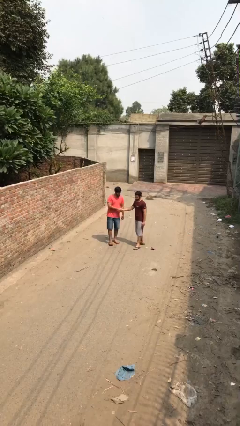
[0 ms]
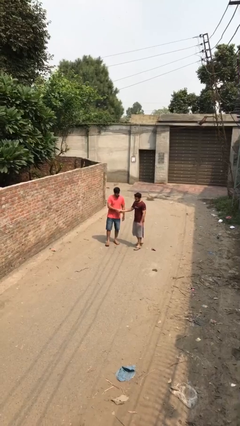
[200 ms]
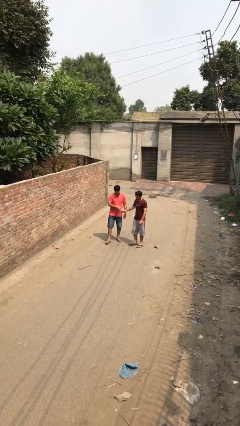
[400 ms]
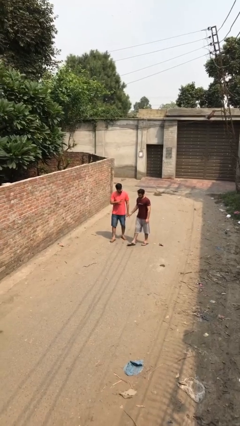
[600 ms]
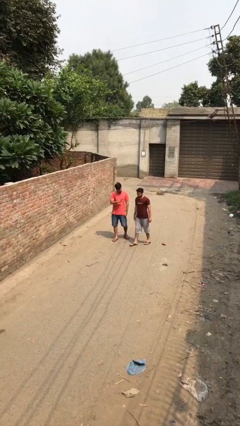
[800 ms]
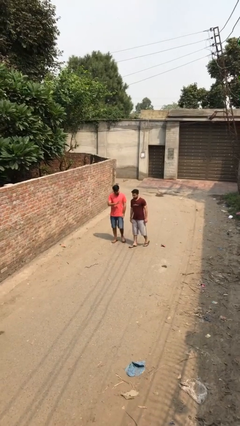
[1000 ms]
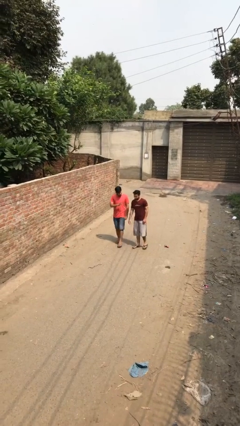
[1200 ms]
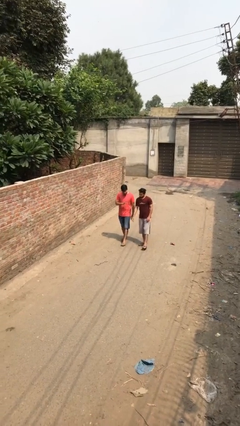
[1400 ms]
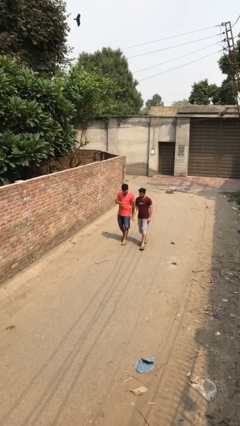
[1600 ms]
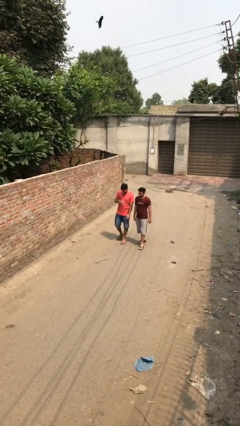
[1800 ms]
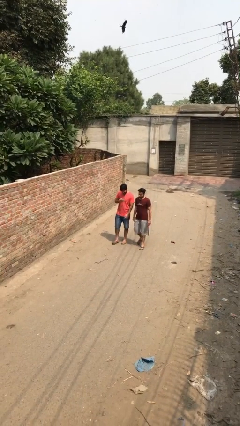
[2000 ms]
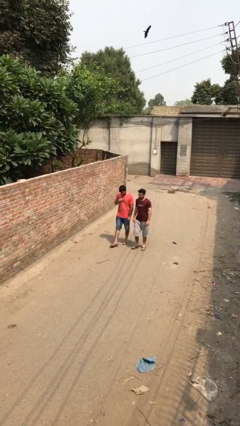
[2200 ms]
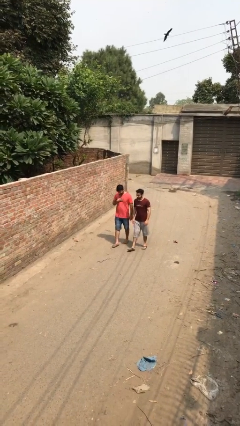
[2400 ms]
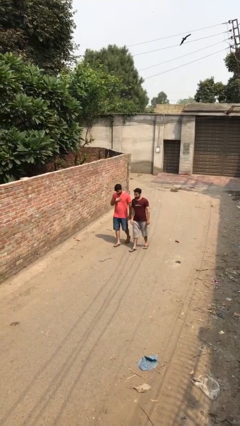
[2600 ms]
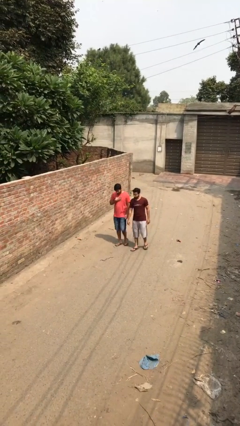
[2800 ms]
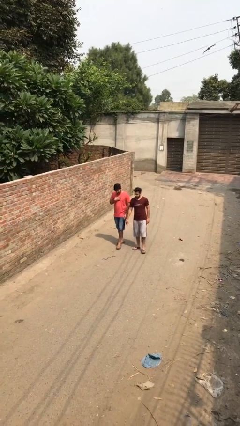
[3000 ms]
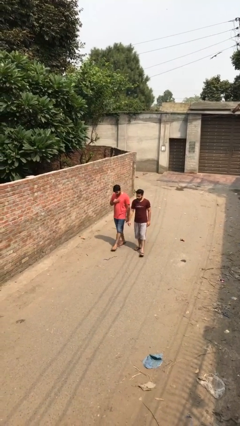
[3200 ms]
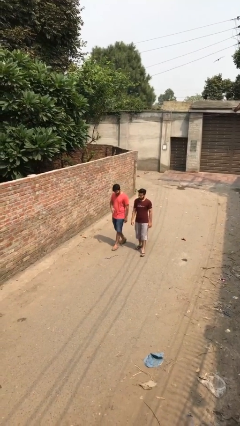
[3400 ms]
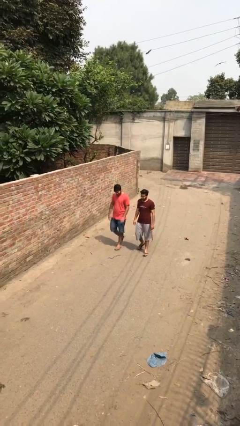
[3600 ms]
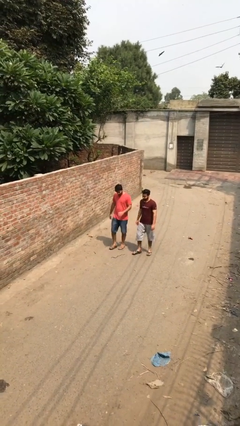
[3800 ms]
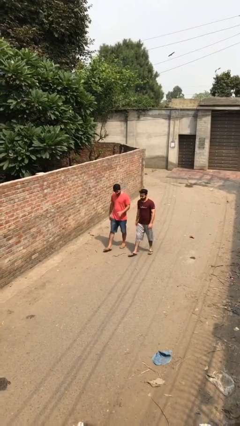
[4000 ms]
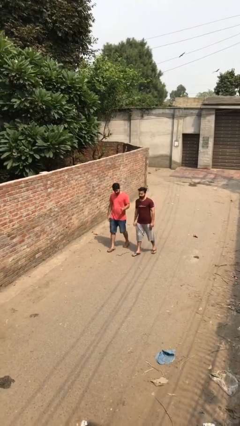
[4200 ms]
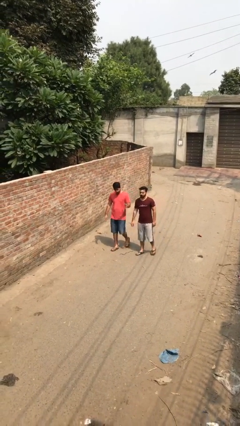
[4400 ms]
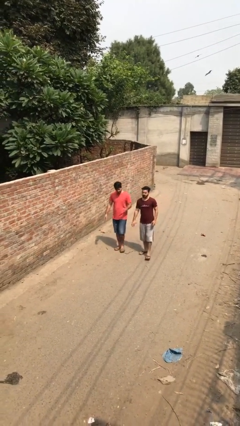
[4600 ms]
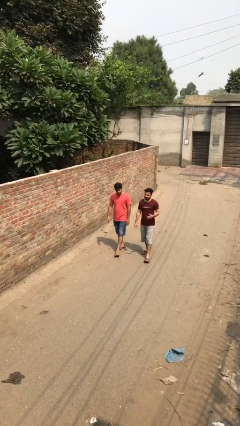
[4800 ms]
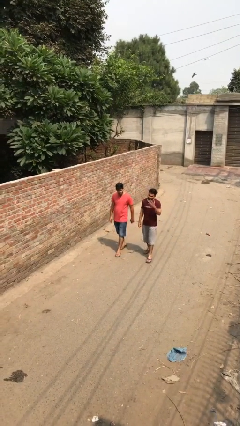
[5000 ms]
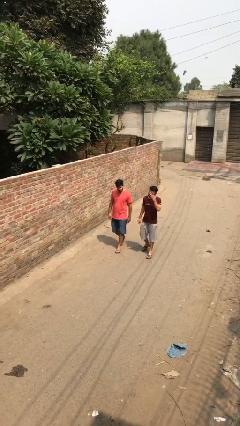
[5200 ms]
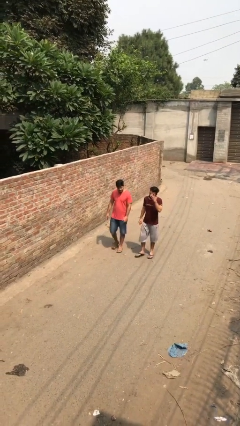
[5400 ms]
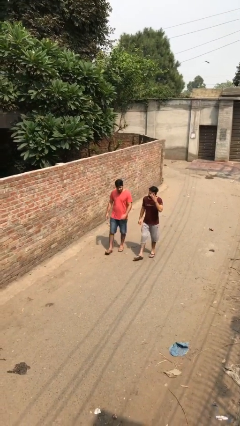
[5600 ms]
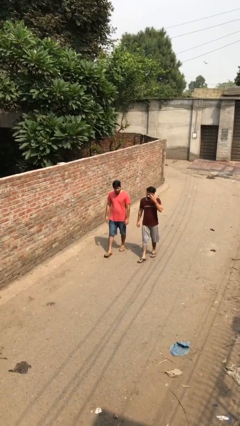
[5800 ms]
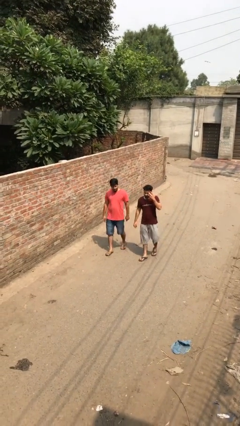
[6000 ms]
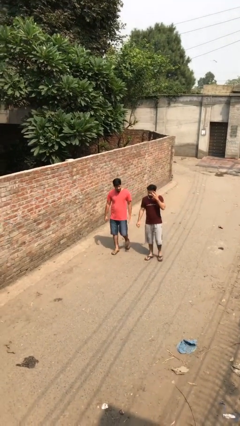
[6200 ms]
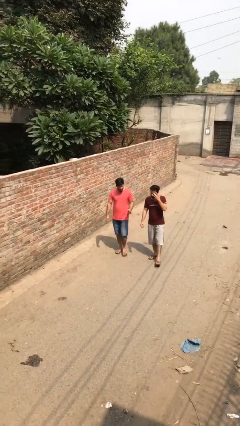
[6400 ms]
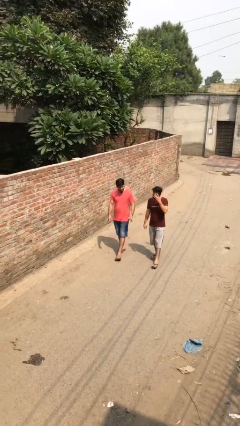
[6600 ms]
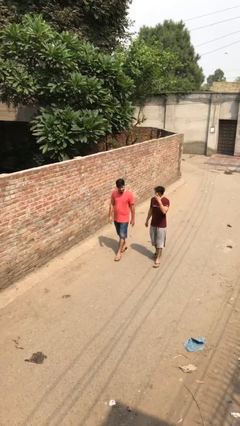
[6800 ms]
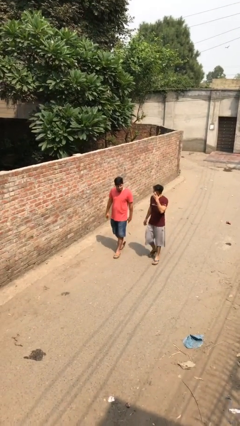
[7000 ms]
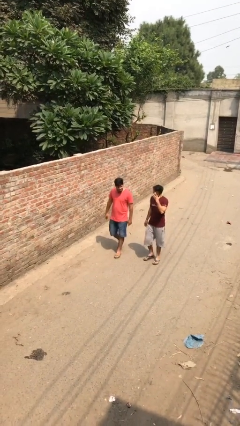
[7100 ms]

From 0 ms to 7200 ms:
person talks to person

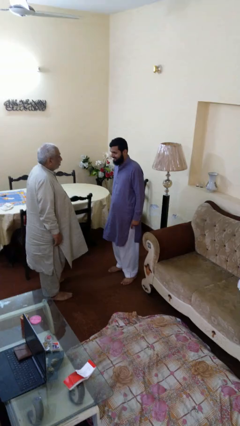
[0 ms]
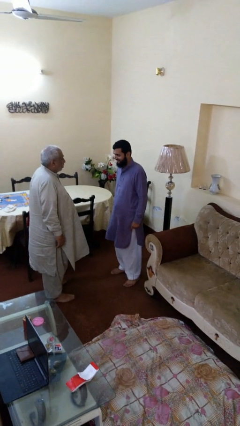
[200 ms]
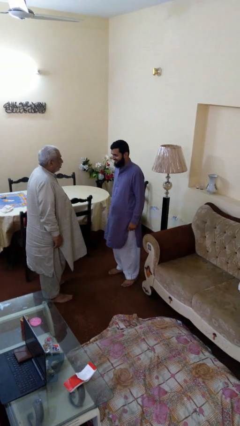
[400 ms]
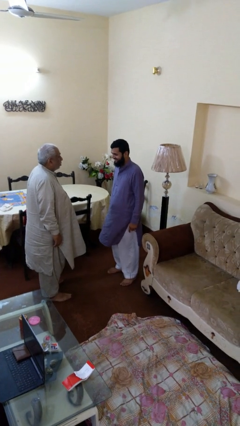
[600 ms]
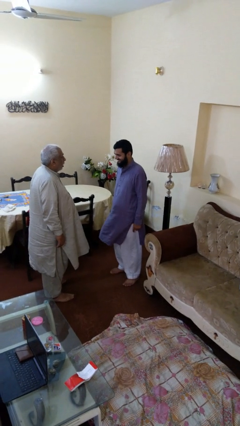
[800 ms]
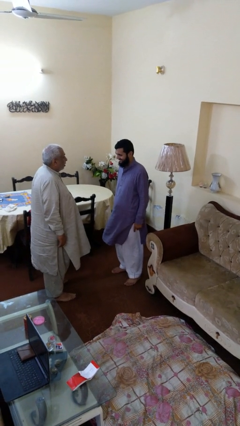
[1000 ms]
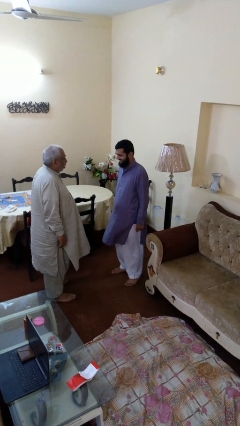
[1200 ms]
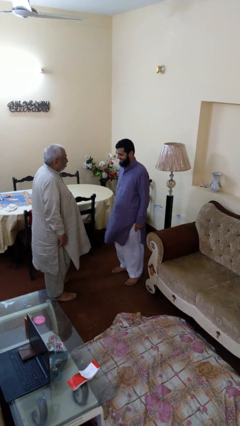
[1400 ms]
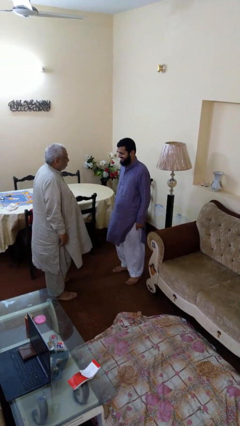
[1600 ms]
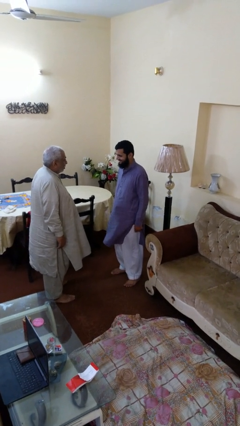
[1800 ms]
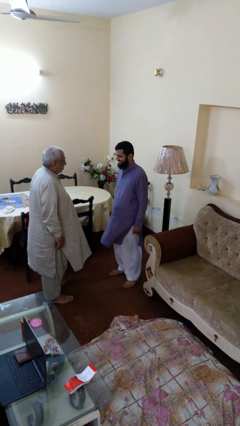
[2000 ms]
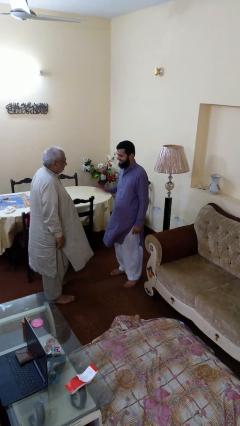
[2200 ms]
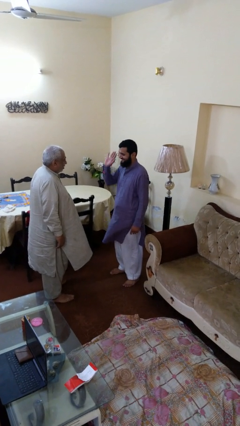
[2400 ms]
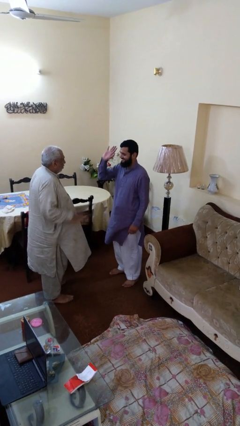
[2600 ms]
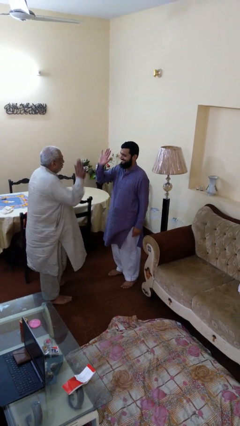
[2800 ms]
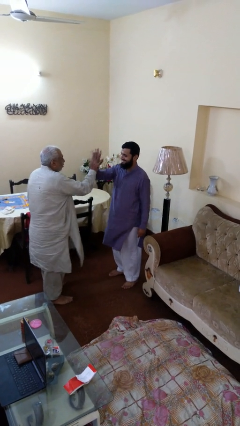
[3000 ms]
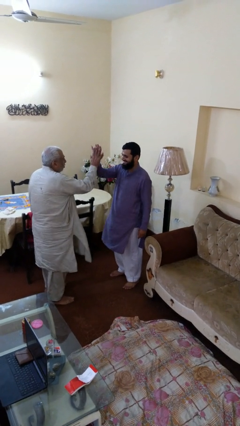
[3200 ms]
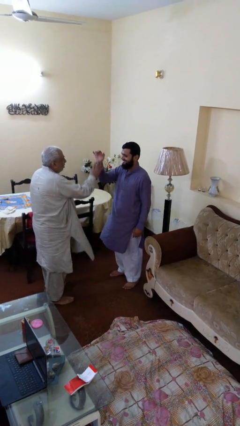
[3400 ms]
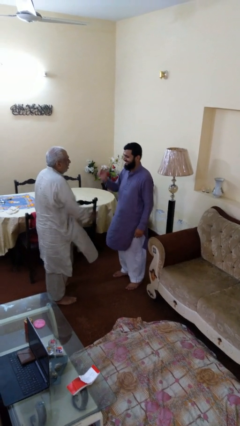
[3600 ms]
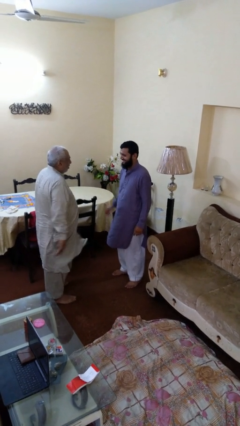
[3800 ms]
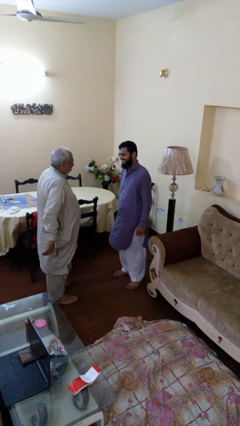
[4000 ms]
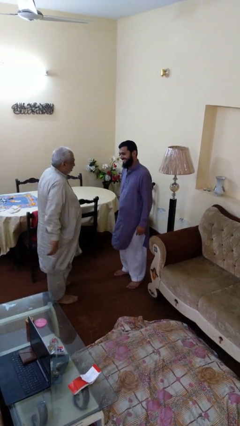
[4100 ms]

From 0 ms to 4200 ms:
person highfives hand

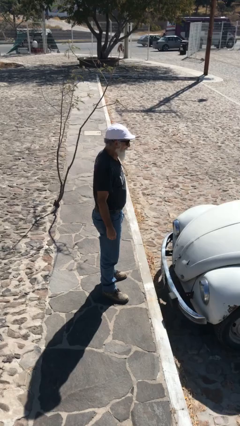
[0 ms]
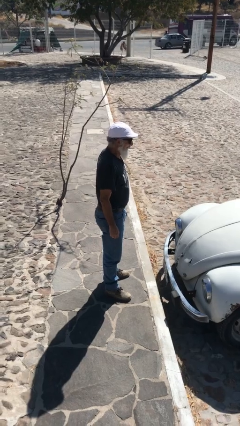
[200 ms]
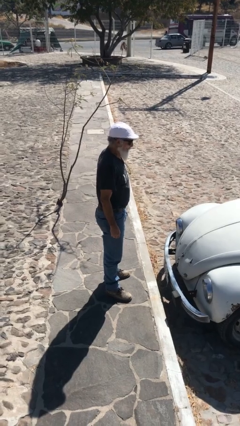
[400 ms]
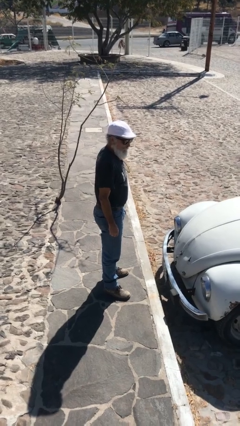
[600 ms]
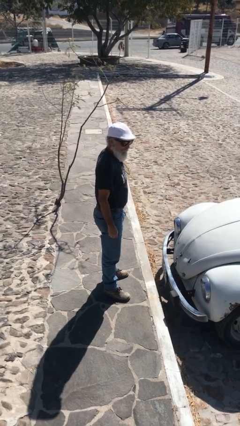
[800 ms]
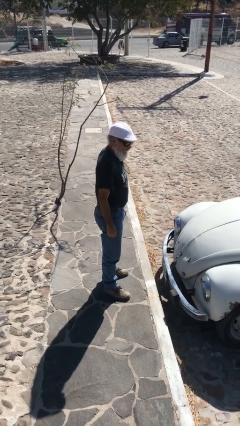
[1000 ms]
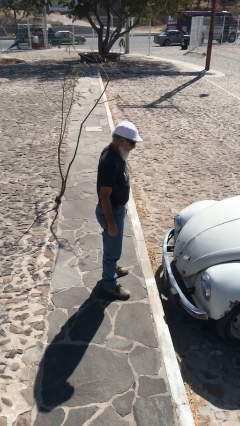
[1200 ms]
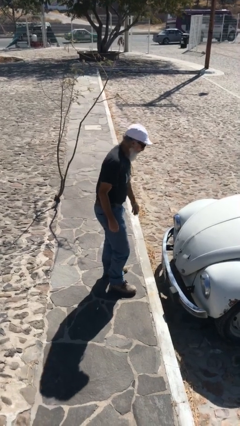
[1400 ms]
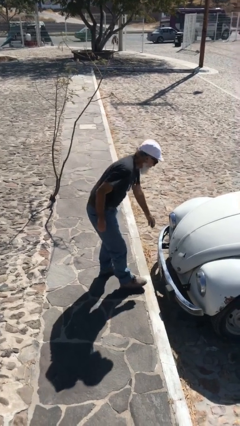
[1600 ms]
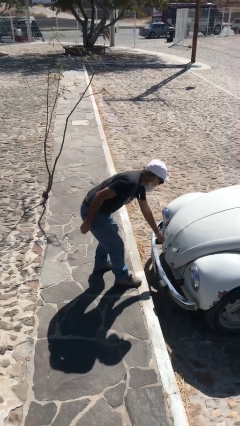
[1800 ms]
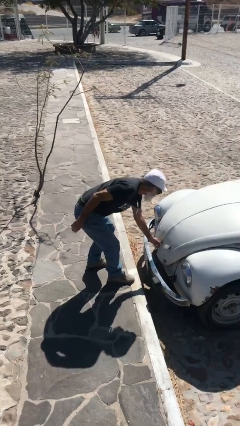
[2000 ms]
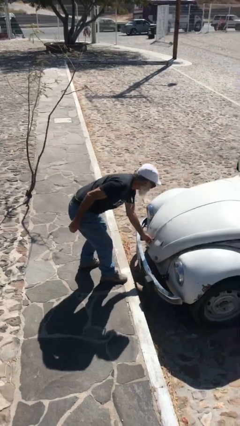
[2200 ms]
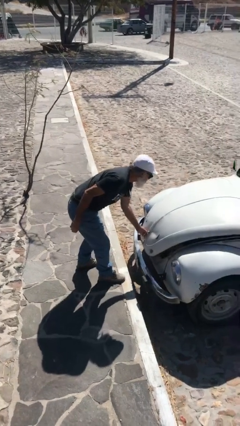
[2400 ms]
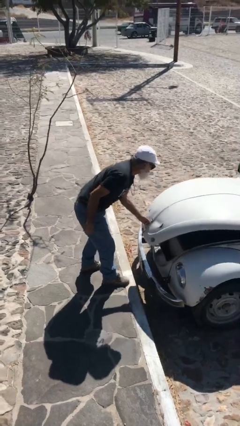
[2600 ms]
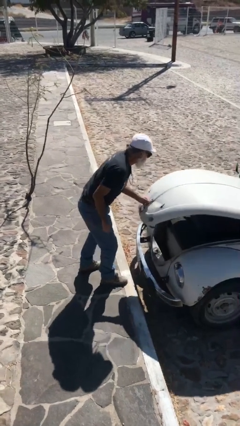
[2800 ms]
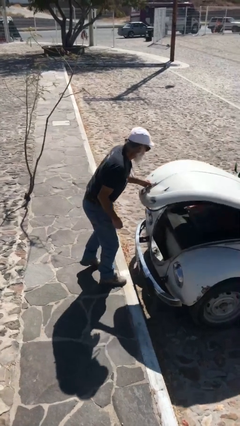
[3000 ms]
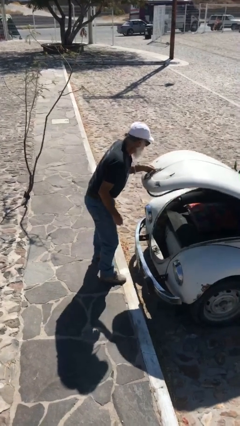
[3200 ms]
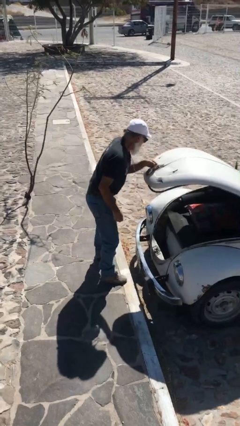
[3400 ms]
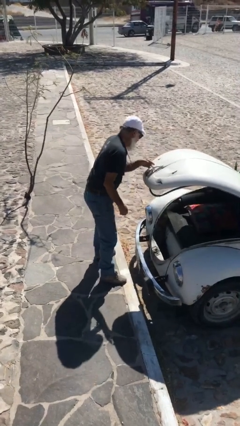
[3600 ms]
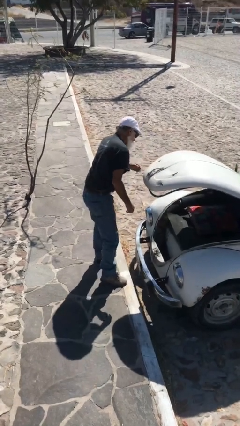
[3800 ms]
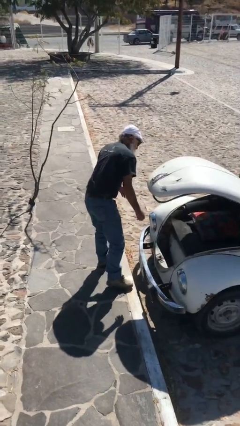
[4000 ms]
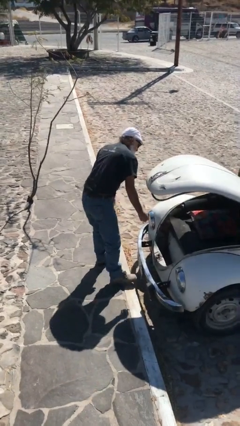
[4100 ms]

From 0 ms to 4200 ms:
person opens car trunk

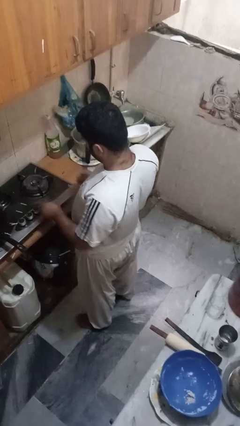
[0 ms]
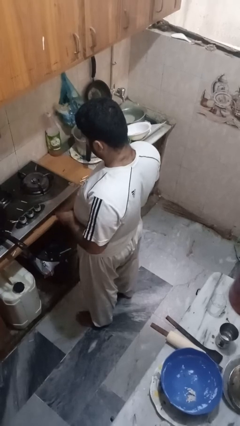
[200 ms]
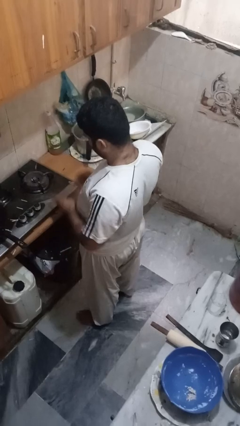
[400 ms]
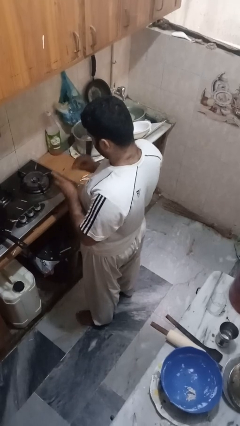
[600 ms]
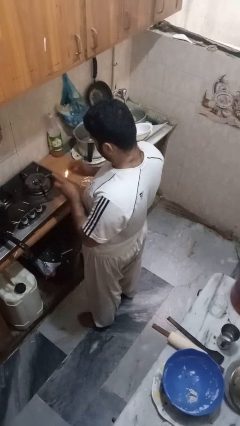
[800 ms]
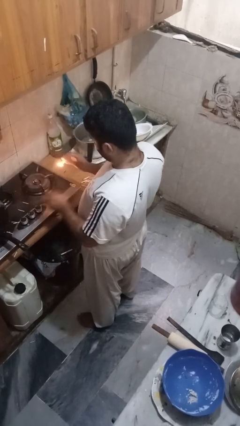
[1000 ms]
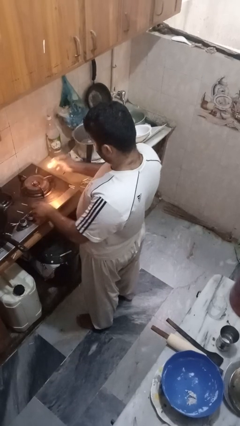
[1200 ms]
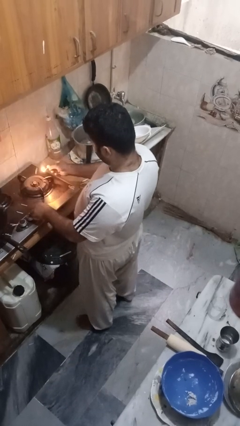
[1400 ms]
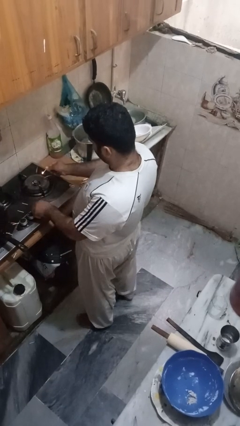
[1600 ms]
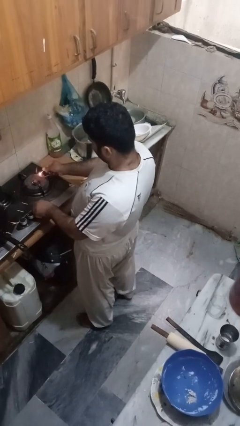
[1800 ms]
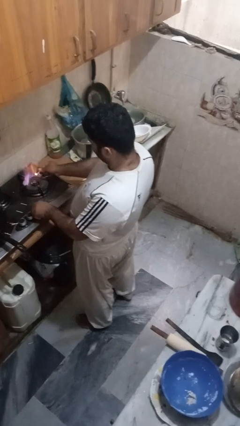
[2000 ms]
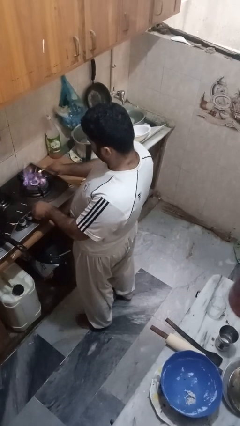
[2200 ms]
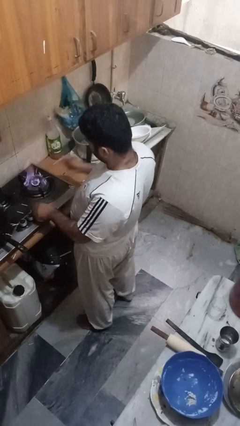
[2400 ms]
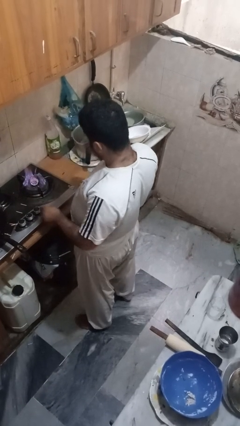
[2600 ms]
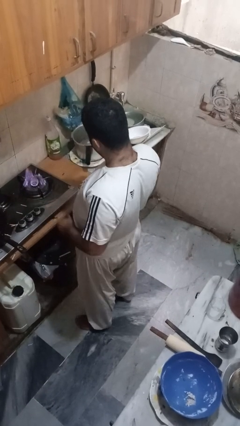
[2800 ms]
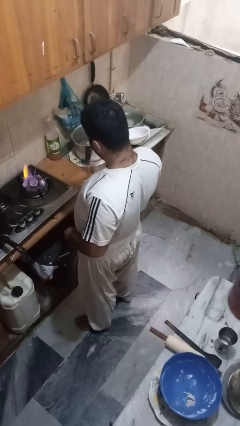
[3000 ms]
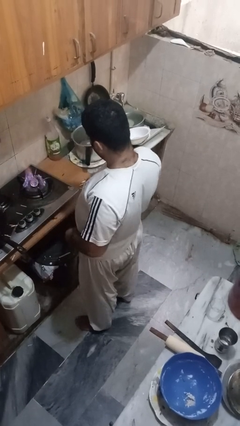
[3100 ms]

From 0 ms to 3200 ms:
person turns on stovetop
